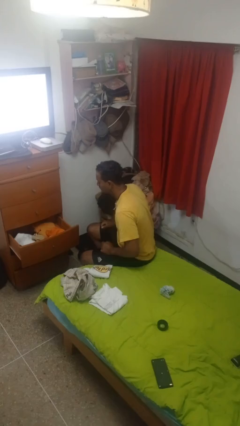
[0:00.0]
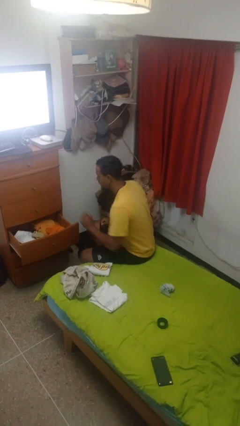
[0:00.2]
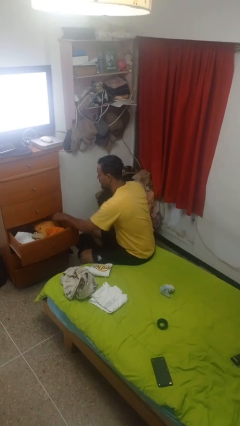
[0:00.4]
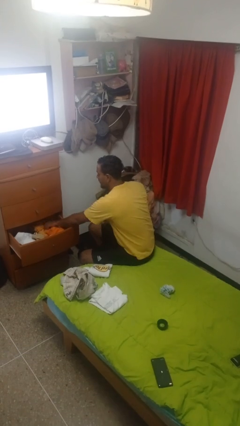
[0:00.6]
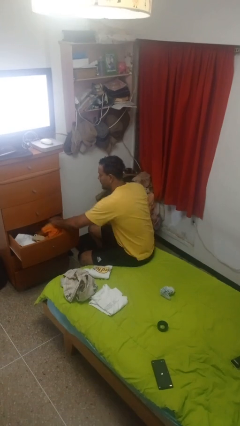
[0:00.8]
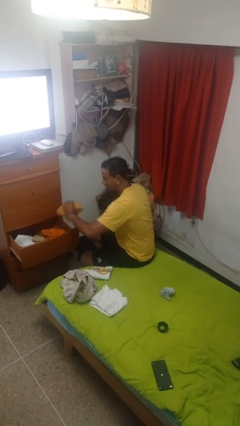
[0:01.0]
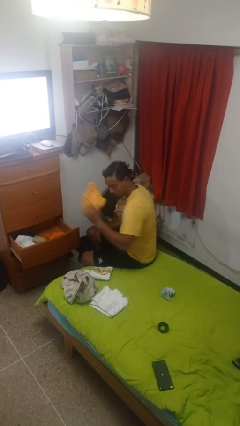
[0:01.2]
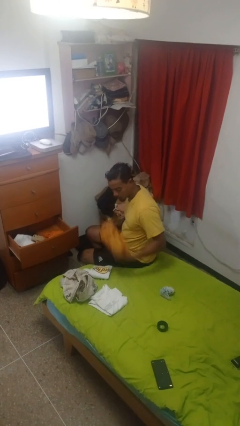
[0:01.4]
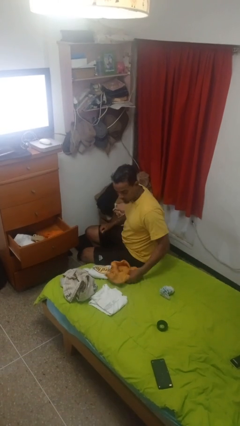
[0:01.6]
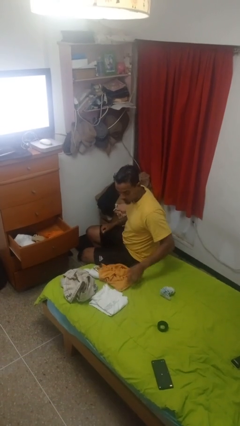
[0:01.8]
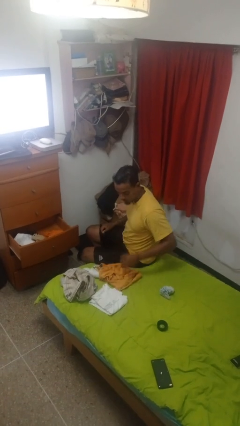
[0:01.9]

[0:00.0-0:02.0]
person takes clothes from dresser

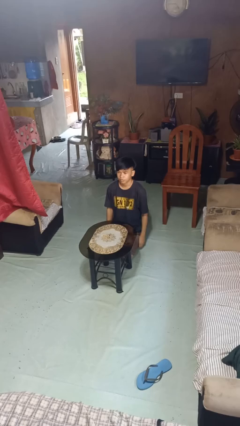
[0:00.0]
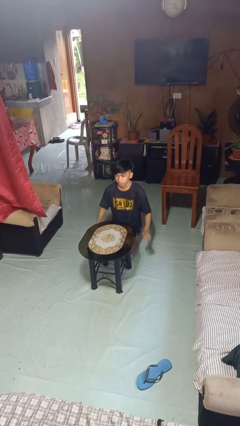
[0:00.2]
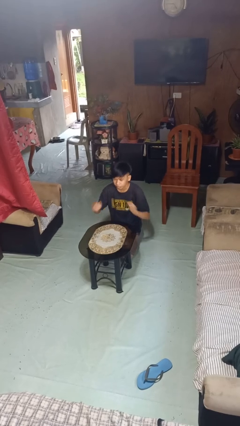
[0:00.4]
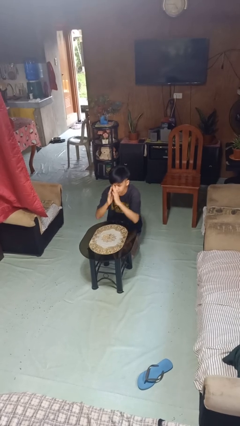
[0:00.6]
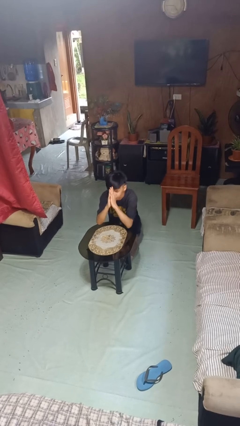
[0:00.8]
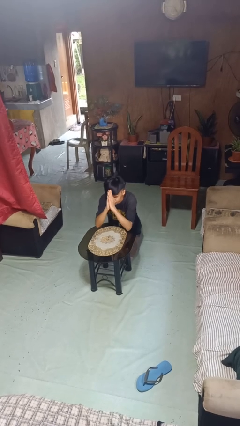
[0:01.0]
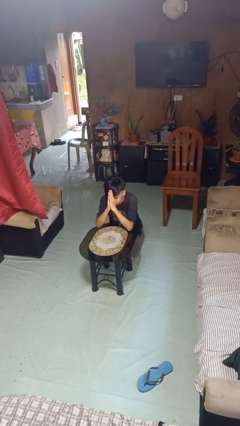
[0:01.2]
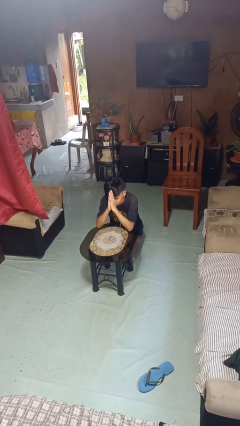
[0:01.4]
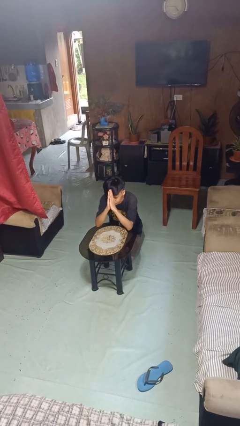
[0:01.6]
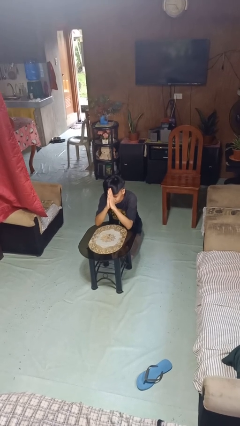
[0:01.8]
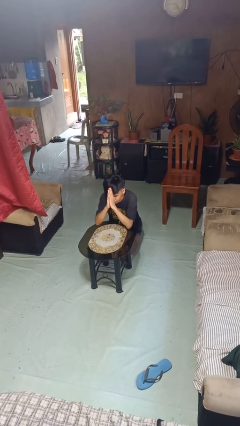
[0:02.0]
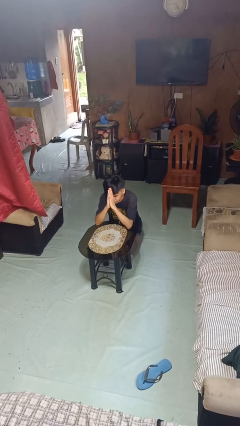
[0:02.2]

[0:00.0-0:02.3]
person prays

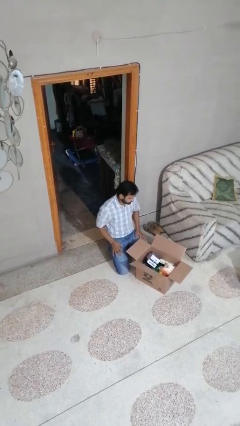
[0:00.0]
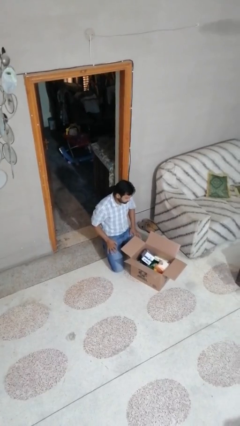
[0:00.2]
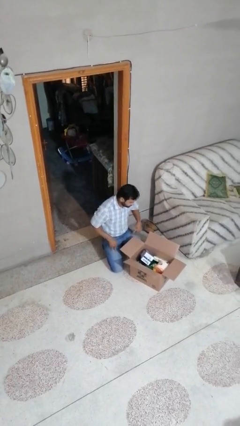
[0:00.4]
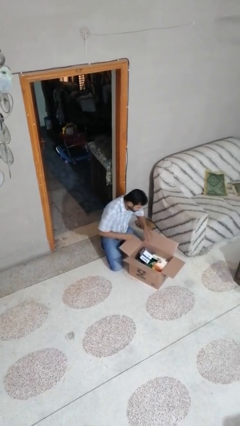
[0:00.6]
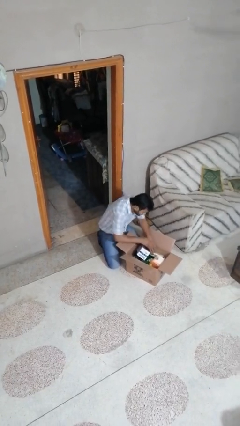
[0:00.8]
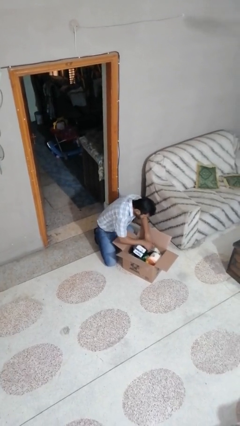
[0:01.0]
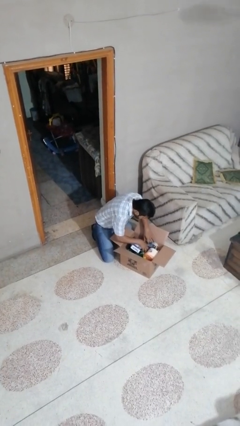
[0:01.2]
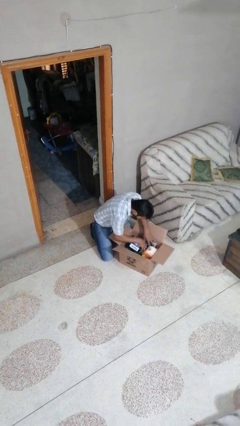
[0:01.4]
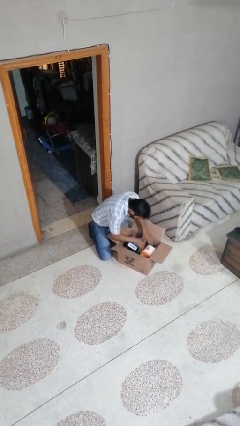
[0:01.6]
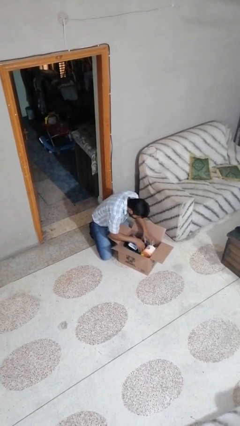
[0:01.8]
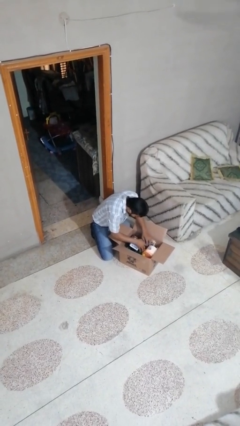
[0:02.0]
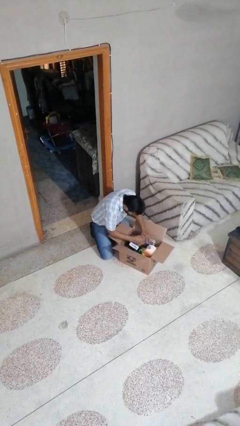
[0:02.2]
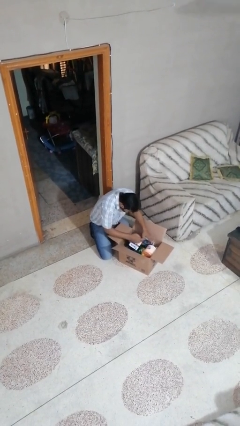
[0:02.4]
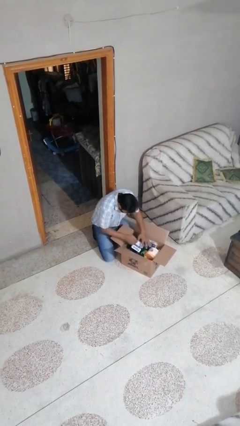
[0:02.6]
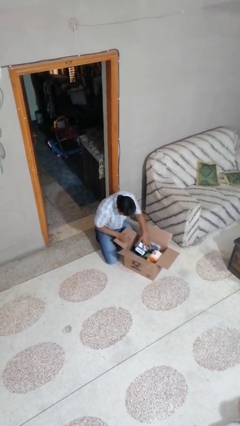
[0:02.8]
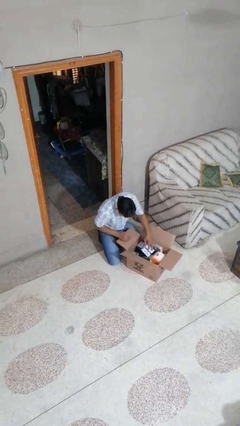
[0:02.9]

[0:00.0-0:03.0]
person searches in box

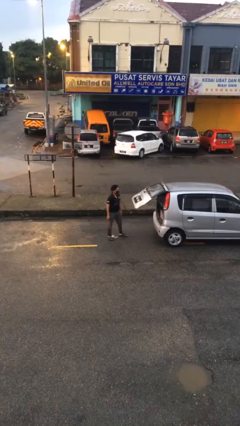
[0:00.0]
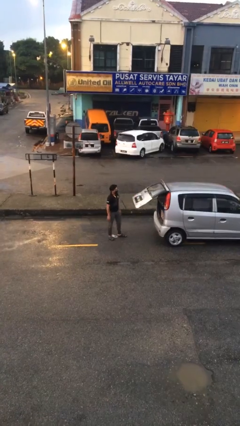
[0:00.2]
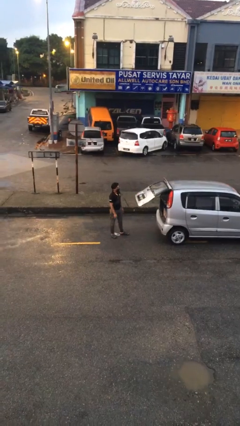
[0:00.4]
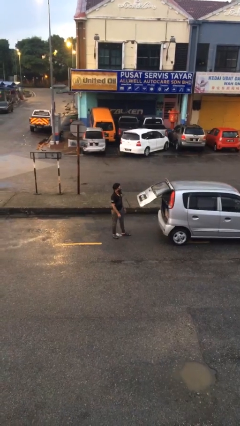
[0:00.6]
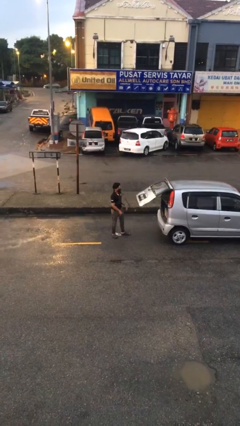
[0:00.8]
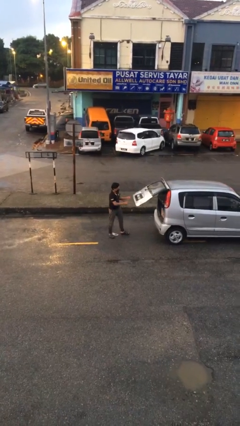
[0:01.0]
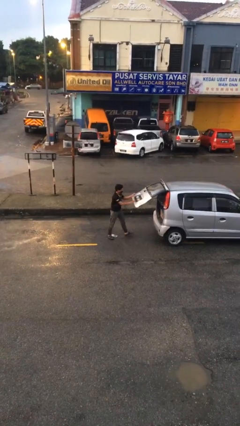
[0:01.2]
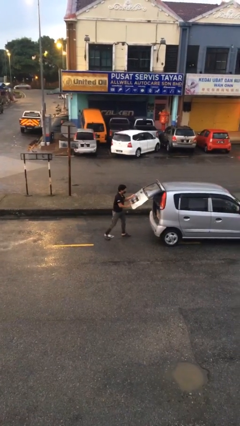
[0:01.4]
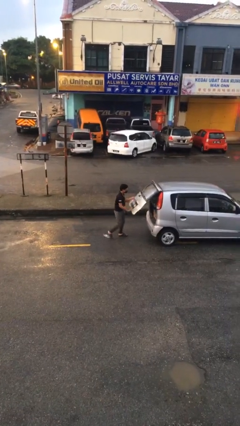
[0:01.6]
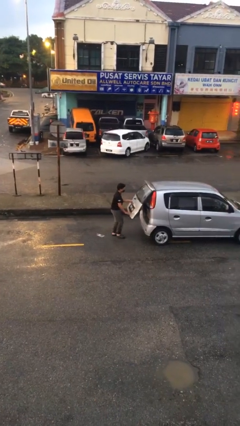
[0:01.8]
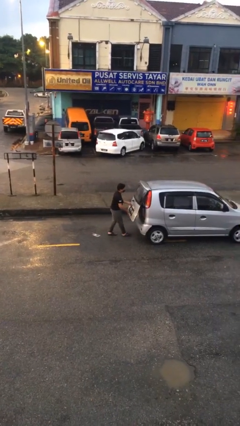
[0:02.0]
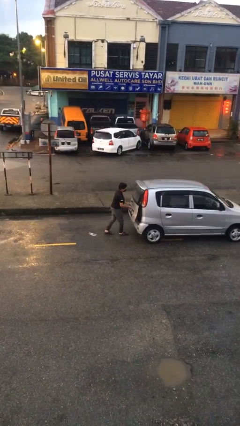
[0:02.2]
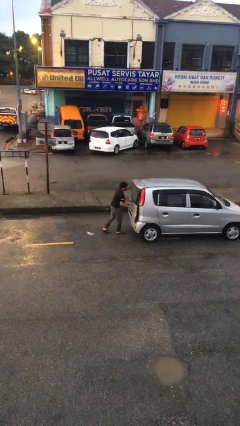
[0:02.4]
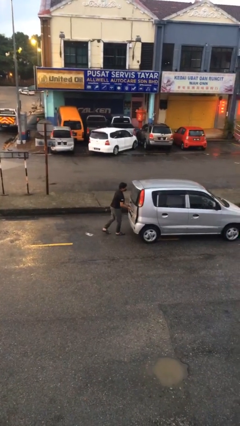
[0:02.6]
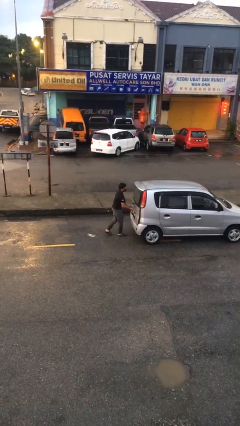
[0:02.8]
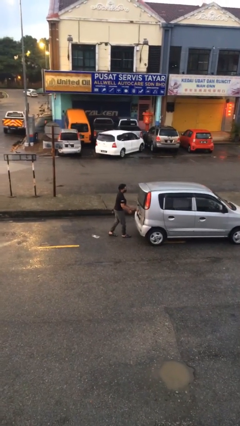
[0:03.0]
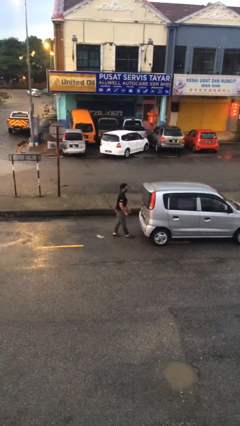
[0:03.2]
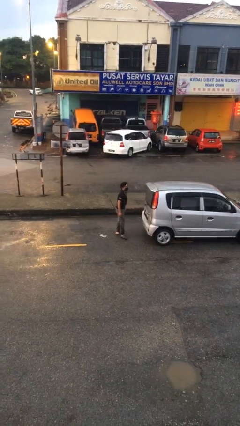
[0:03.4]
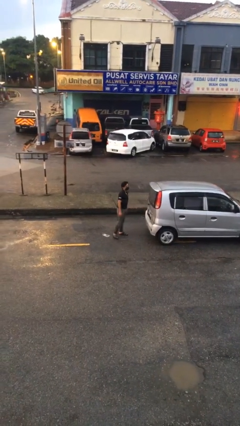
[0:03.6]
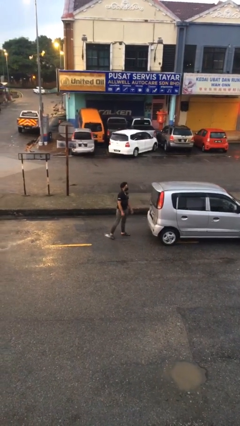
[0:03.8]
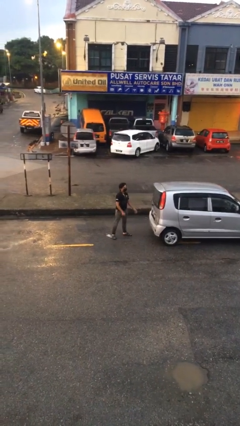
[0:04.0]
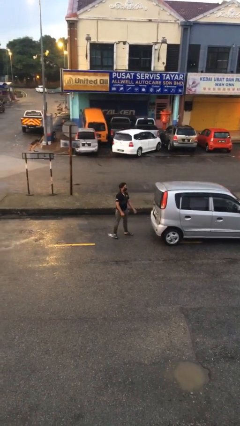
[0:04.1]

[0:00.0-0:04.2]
person closes car trunk

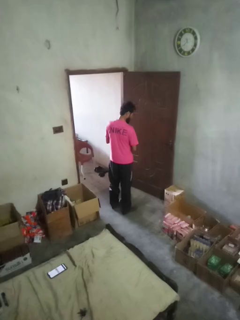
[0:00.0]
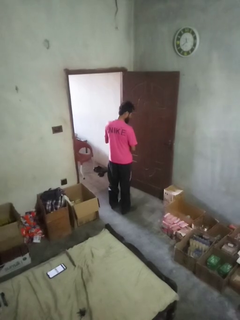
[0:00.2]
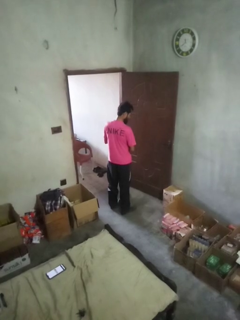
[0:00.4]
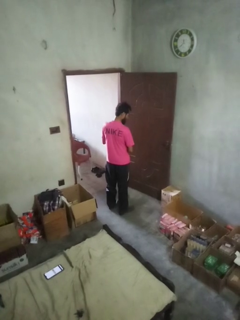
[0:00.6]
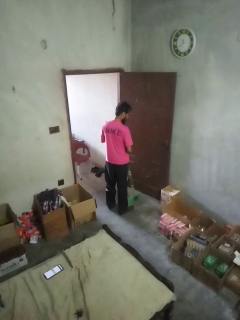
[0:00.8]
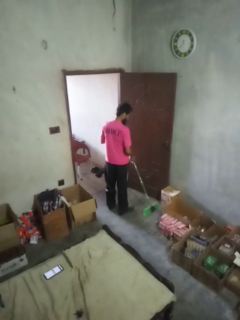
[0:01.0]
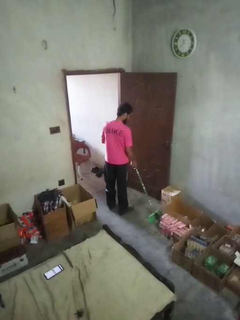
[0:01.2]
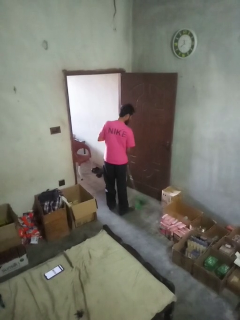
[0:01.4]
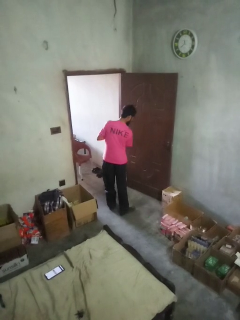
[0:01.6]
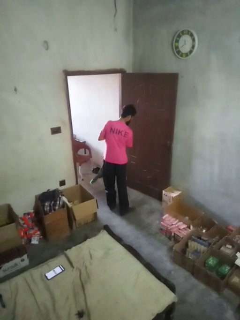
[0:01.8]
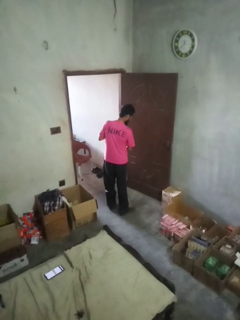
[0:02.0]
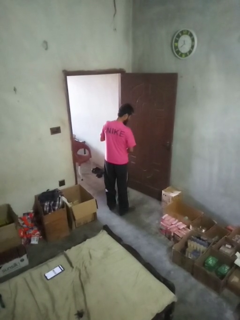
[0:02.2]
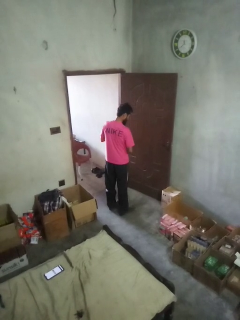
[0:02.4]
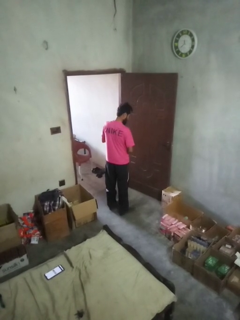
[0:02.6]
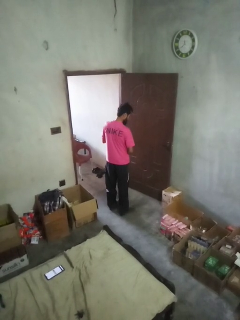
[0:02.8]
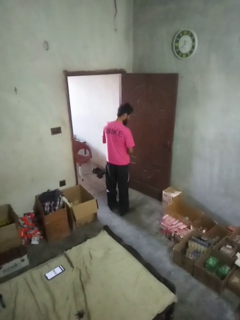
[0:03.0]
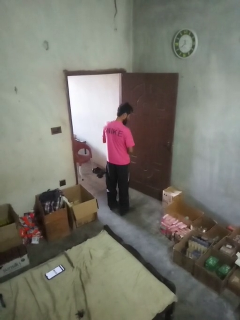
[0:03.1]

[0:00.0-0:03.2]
person sweeps floor

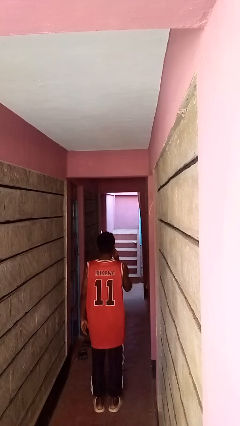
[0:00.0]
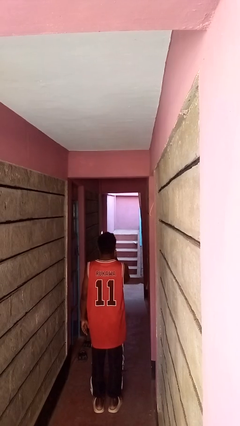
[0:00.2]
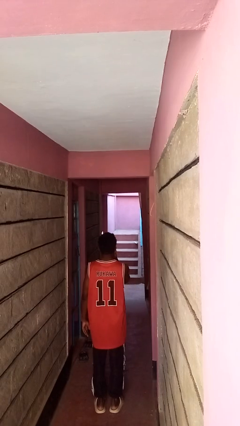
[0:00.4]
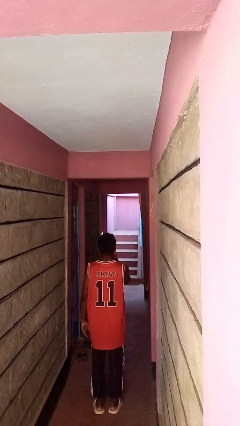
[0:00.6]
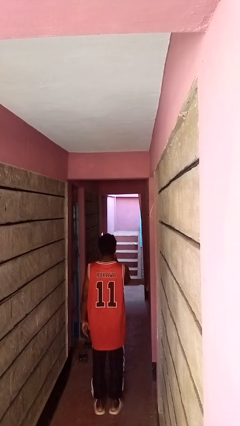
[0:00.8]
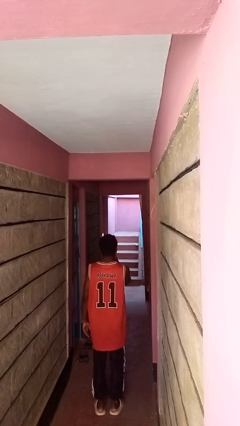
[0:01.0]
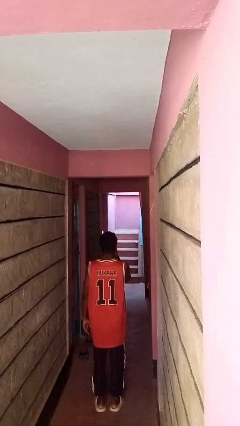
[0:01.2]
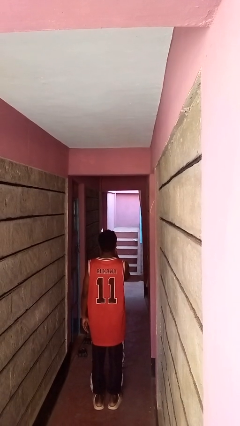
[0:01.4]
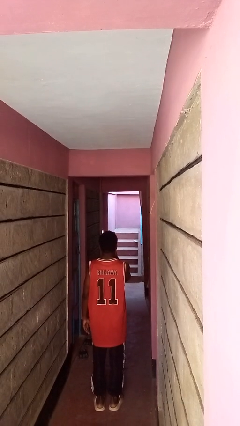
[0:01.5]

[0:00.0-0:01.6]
person rubs eyes

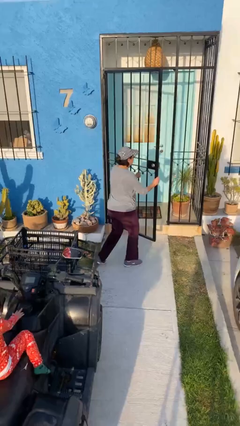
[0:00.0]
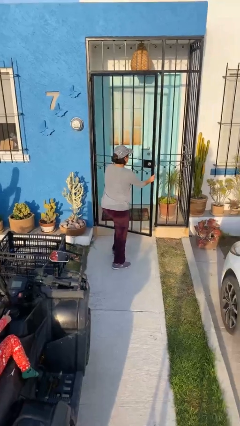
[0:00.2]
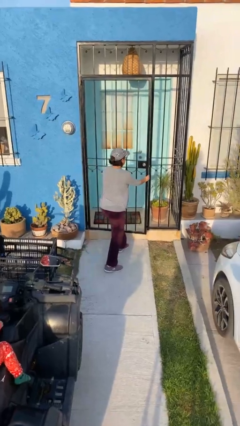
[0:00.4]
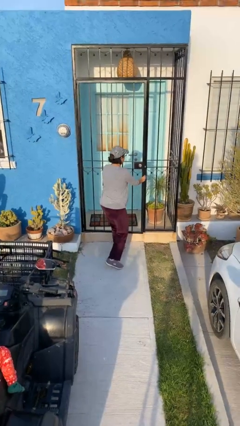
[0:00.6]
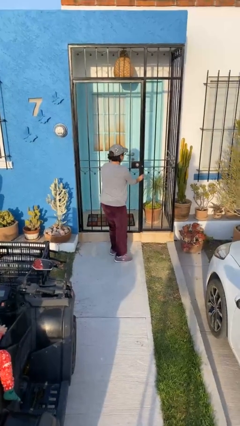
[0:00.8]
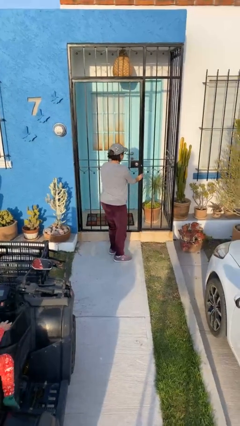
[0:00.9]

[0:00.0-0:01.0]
person closes facility door

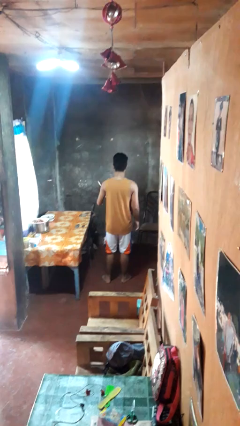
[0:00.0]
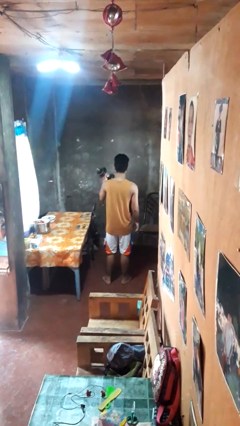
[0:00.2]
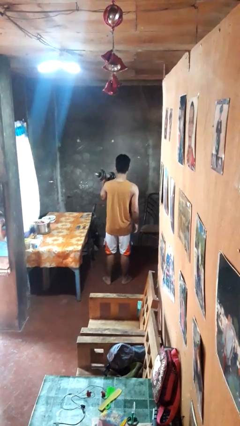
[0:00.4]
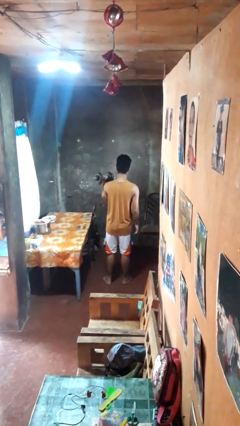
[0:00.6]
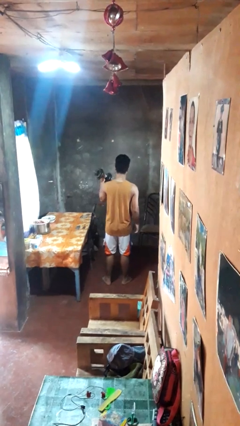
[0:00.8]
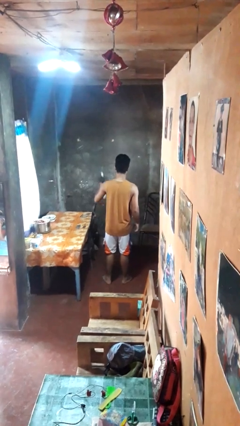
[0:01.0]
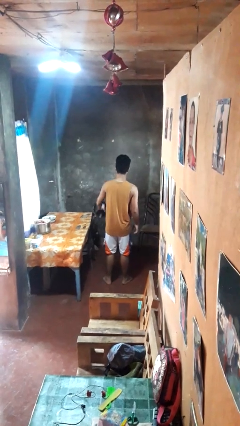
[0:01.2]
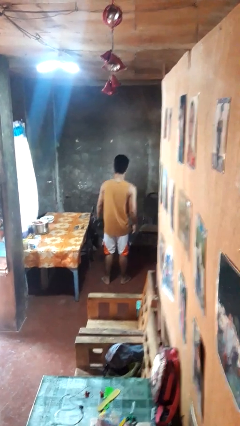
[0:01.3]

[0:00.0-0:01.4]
person lifts dumbbells
